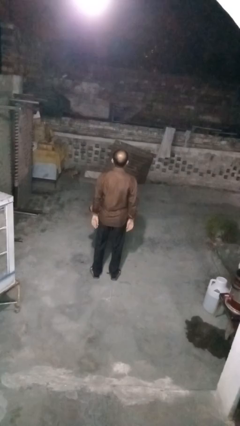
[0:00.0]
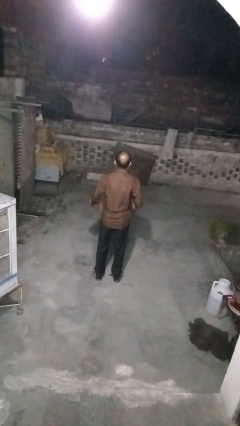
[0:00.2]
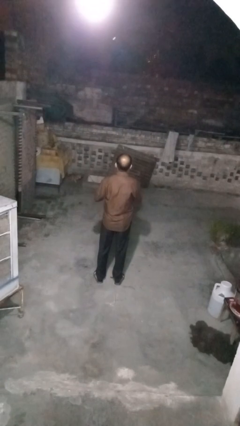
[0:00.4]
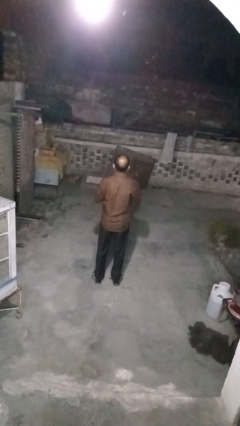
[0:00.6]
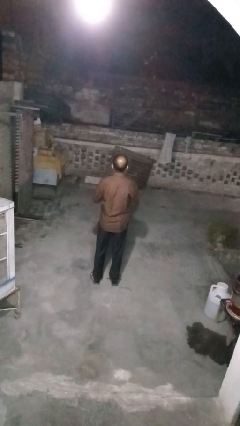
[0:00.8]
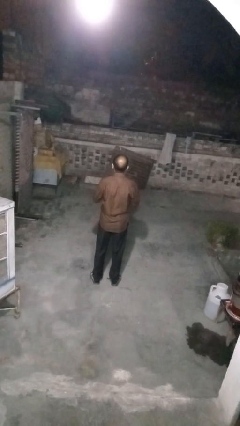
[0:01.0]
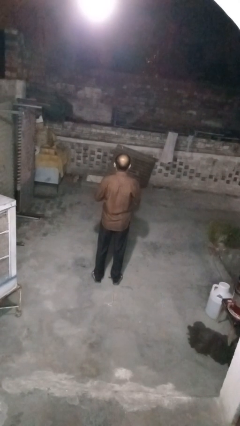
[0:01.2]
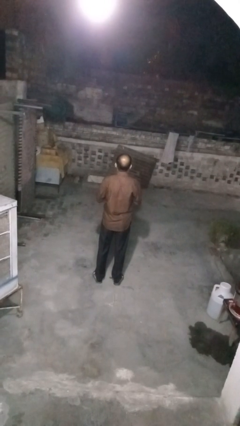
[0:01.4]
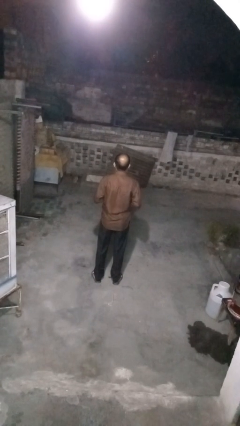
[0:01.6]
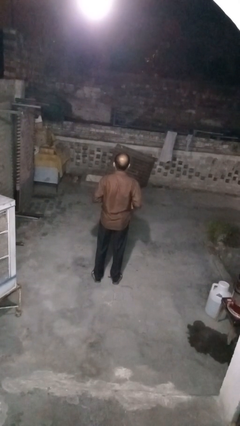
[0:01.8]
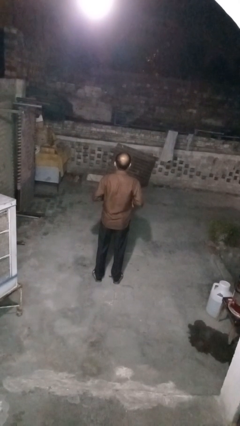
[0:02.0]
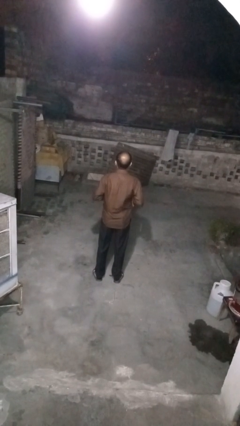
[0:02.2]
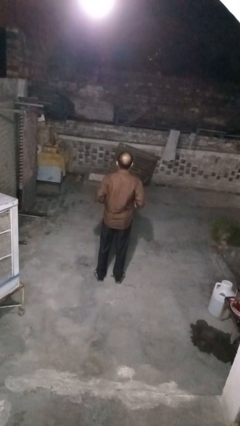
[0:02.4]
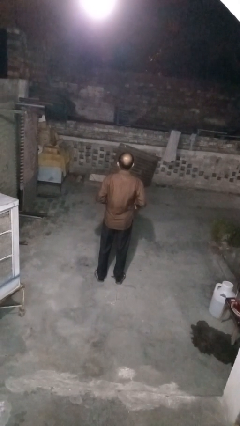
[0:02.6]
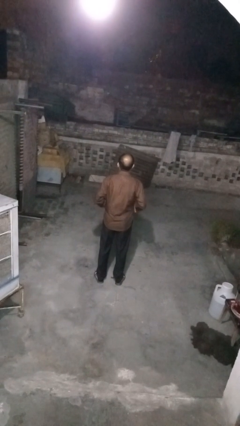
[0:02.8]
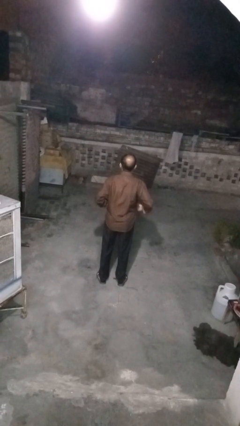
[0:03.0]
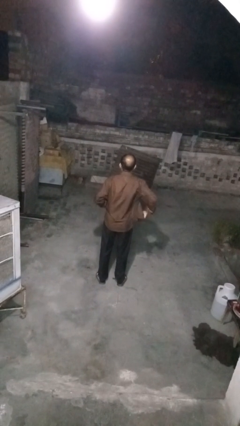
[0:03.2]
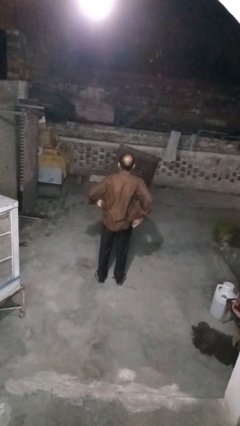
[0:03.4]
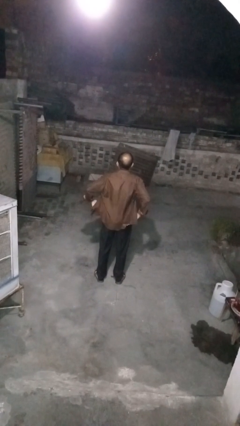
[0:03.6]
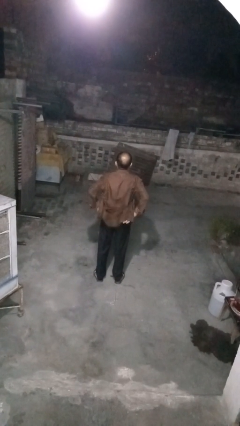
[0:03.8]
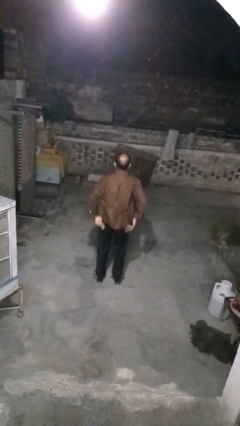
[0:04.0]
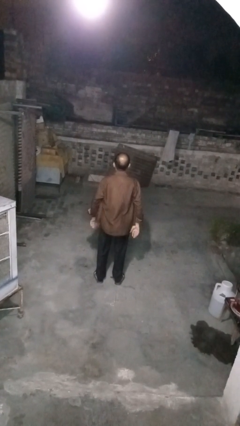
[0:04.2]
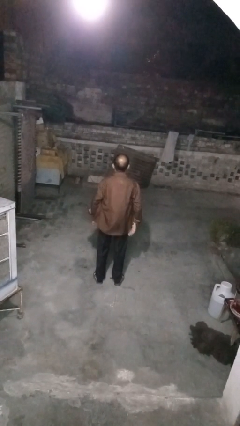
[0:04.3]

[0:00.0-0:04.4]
person unbuttons shirt

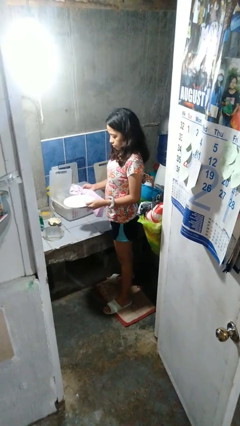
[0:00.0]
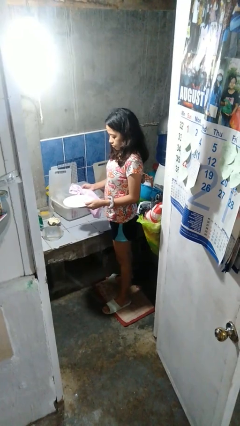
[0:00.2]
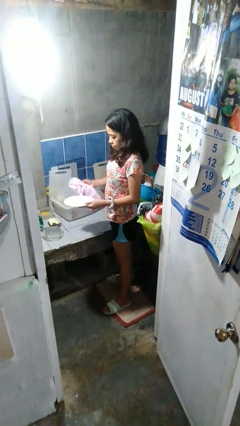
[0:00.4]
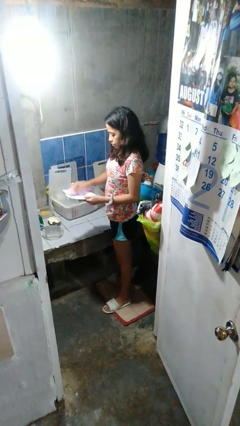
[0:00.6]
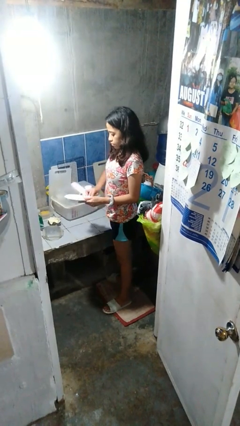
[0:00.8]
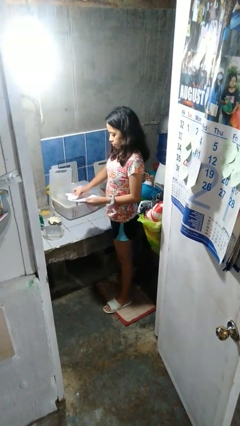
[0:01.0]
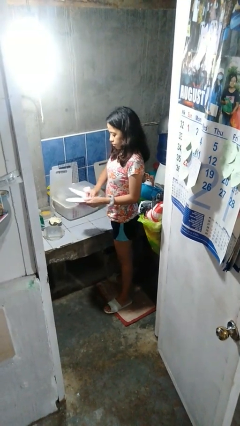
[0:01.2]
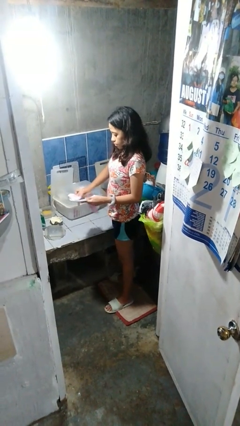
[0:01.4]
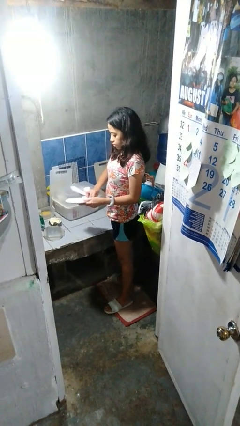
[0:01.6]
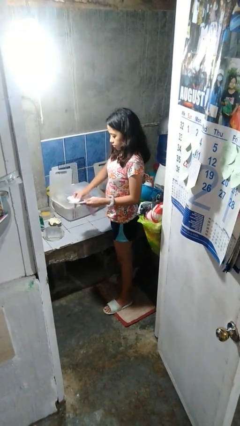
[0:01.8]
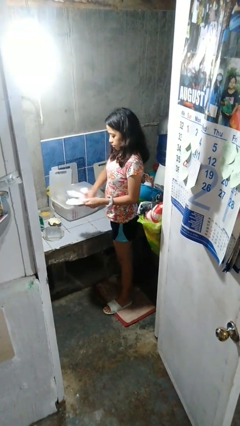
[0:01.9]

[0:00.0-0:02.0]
person dries dish

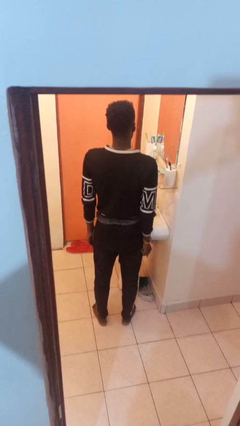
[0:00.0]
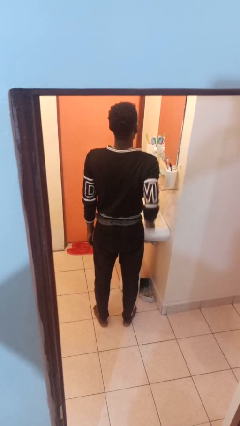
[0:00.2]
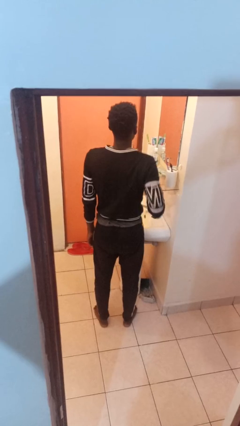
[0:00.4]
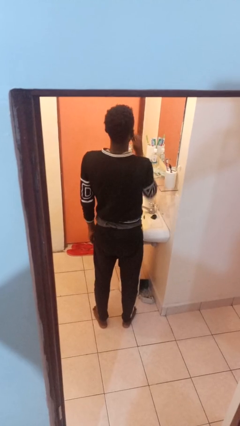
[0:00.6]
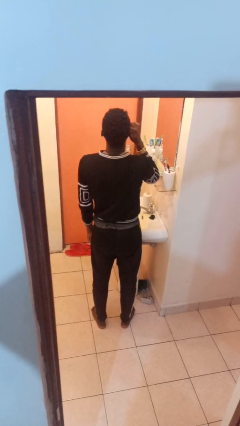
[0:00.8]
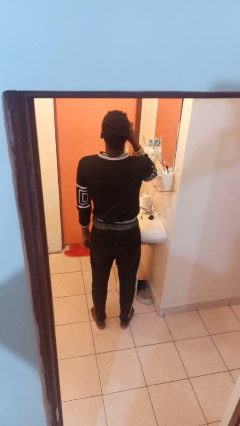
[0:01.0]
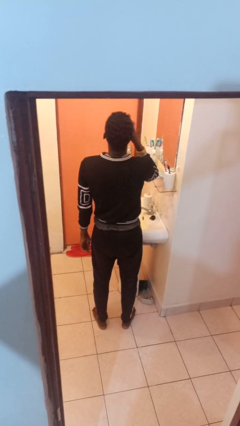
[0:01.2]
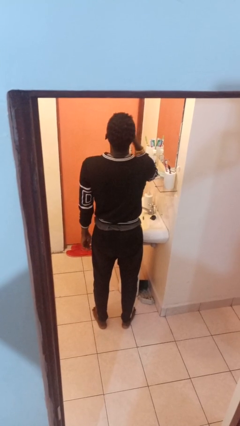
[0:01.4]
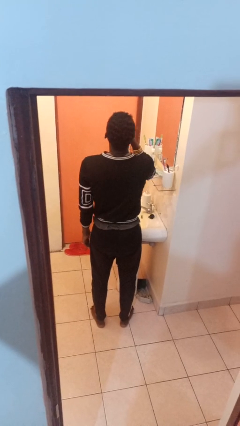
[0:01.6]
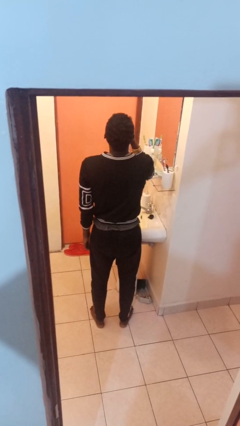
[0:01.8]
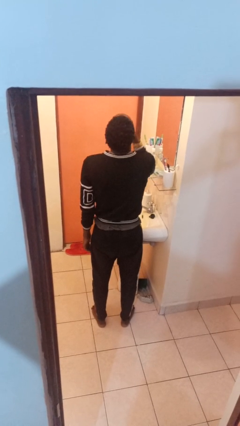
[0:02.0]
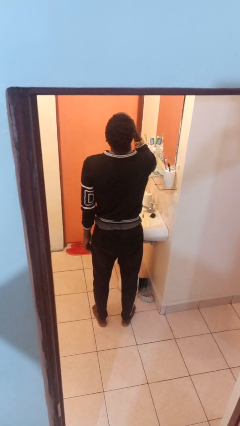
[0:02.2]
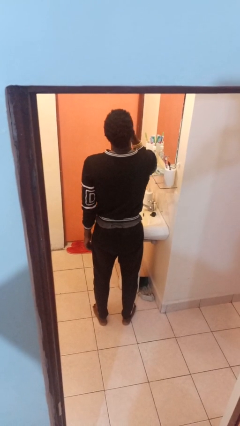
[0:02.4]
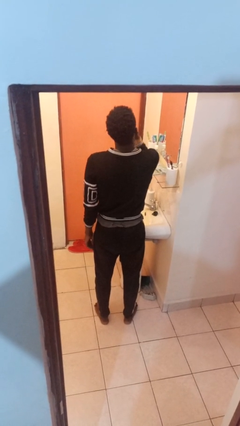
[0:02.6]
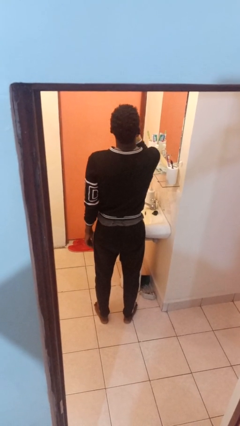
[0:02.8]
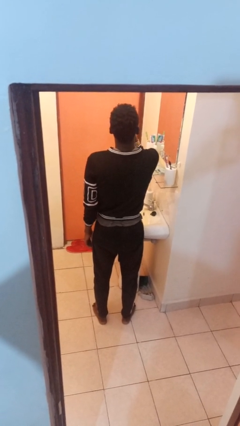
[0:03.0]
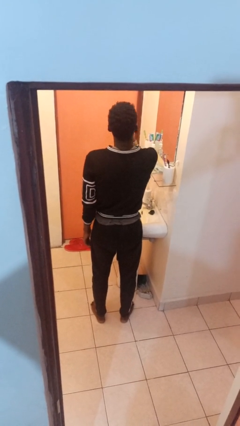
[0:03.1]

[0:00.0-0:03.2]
person brushes teeth

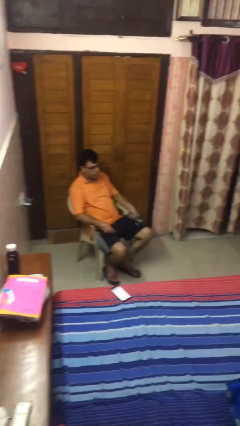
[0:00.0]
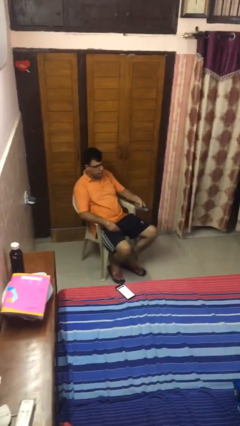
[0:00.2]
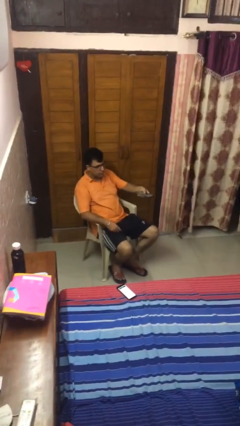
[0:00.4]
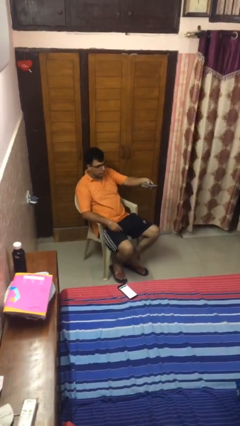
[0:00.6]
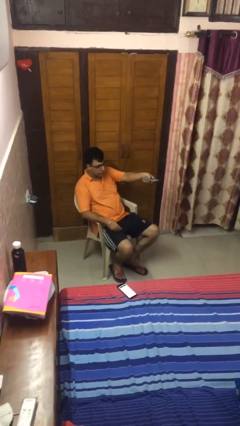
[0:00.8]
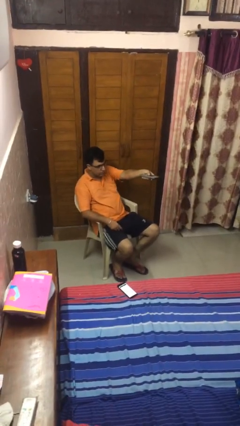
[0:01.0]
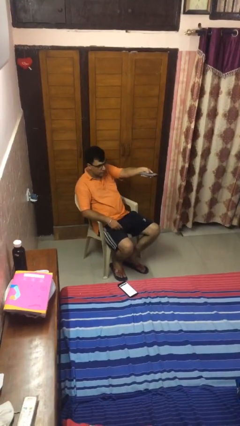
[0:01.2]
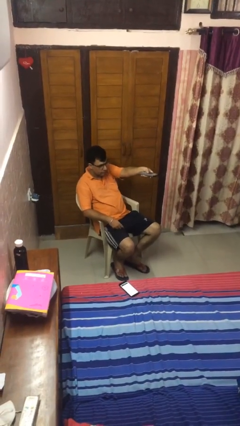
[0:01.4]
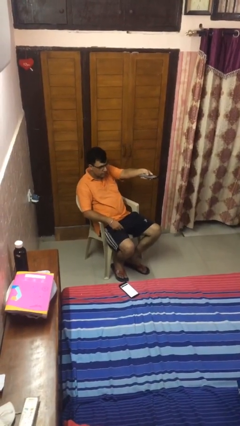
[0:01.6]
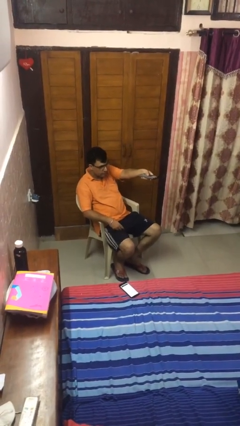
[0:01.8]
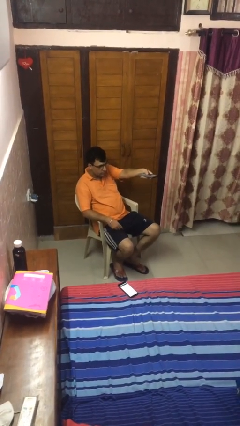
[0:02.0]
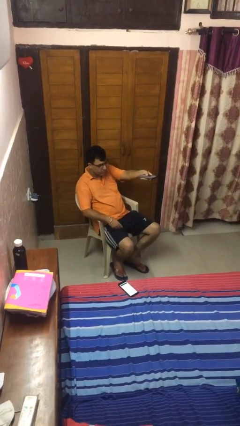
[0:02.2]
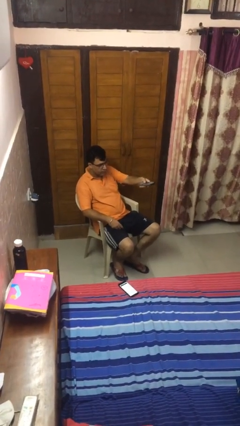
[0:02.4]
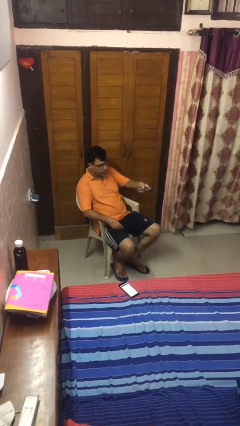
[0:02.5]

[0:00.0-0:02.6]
person uses television remote

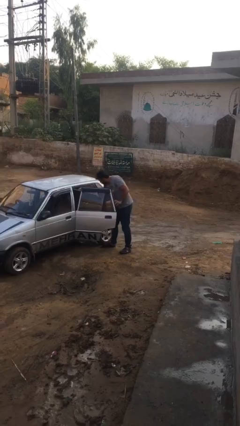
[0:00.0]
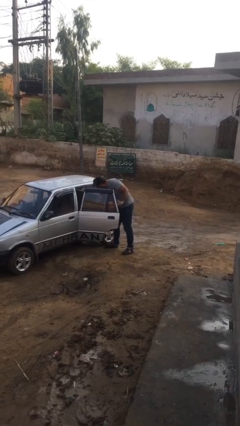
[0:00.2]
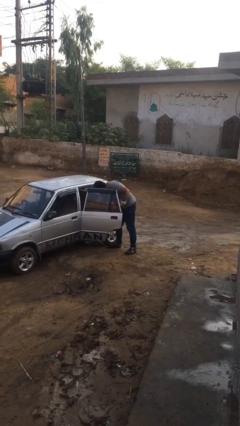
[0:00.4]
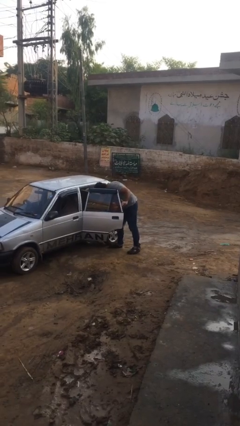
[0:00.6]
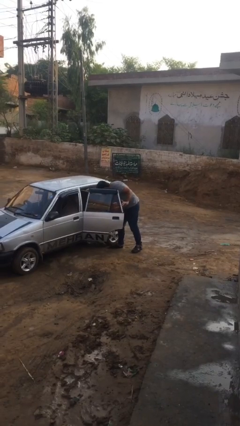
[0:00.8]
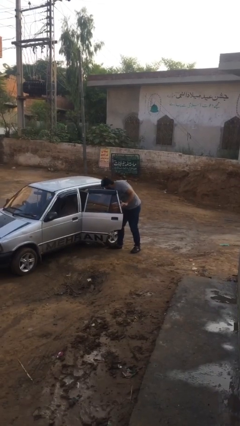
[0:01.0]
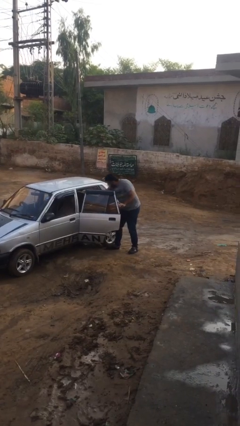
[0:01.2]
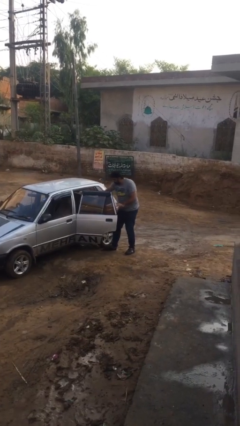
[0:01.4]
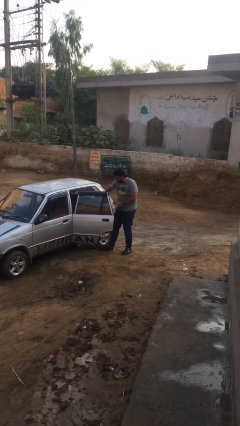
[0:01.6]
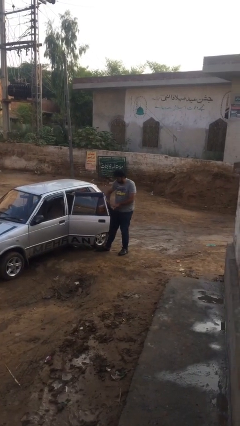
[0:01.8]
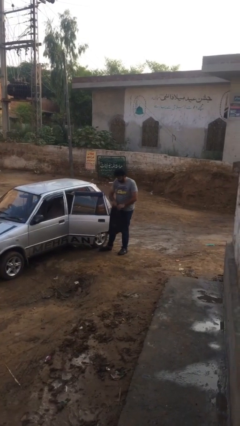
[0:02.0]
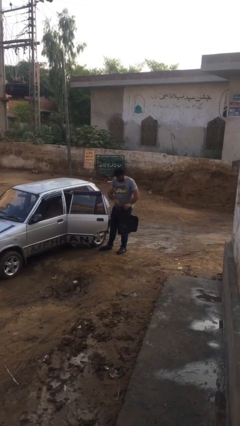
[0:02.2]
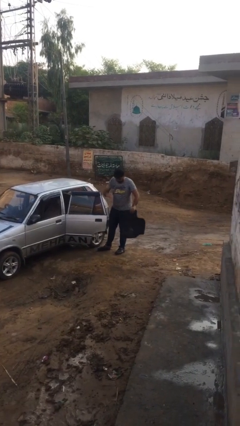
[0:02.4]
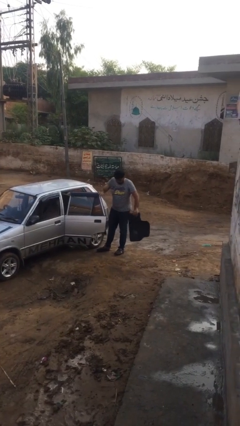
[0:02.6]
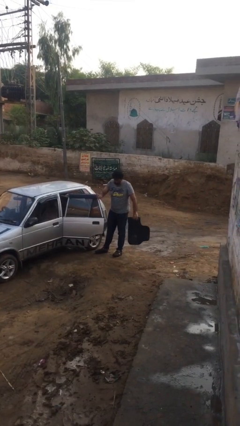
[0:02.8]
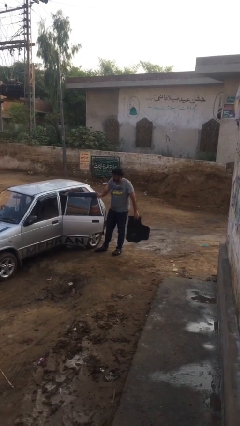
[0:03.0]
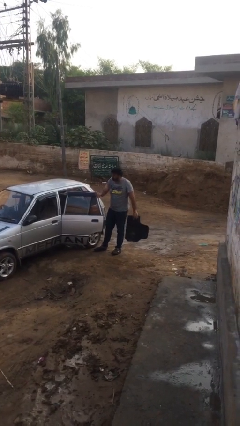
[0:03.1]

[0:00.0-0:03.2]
person unloads car

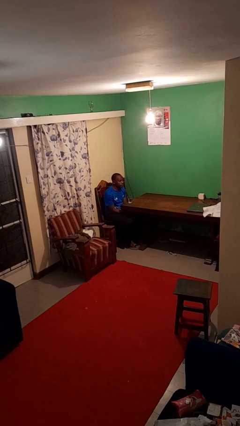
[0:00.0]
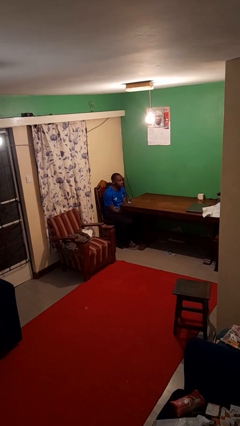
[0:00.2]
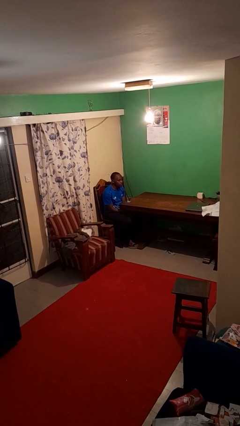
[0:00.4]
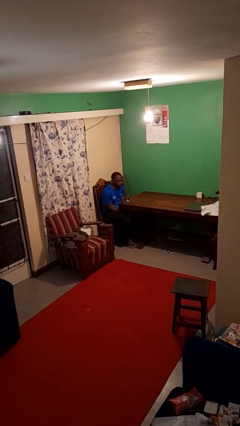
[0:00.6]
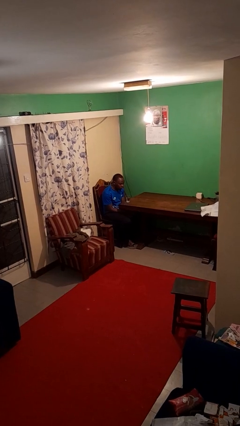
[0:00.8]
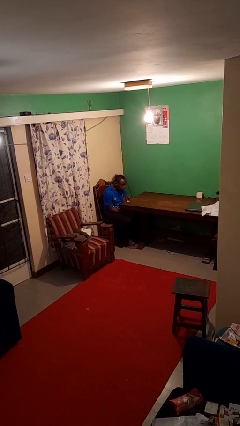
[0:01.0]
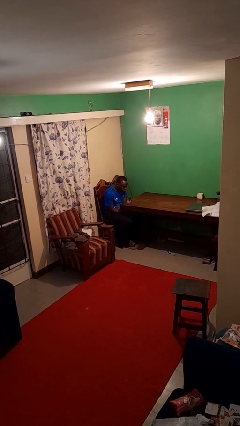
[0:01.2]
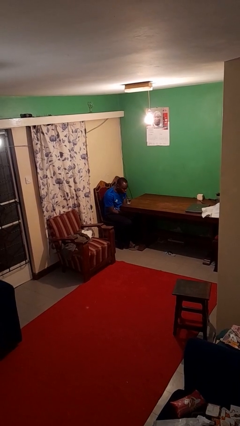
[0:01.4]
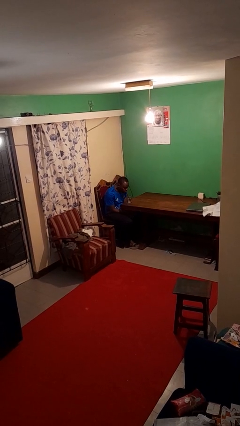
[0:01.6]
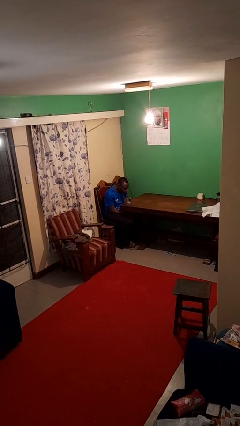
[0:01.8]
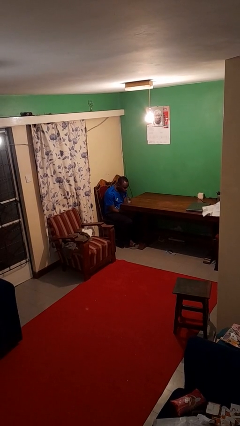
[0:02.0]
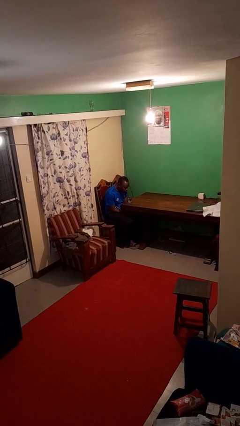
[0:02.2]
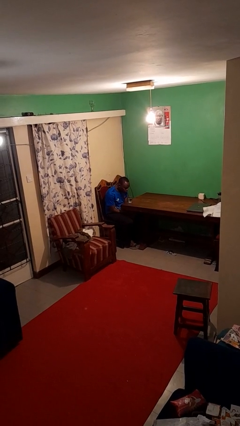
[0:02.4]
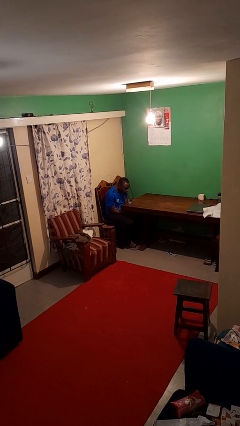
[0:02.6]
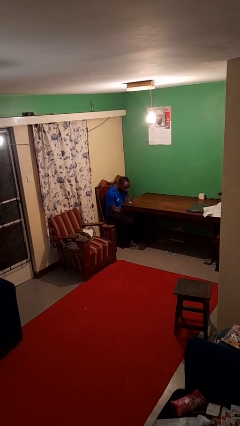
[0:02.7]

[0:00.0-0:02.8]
person drinks from straw
